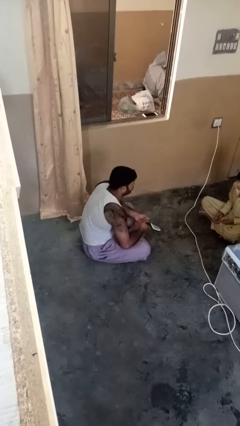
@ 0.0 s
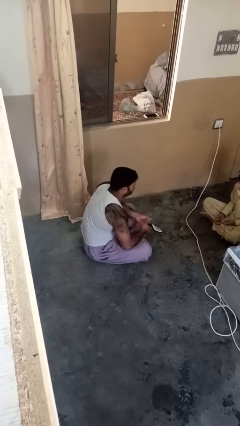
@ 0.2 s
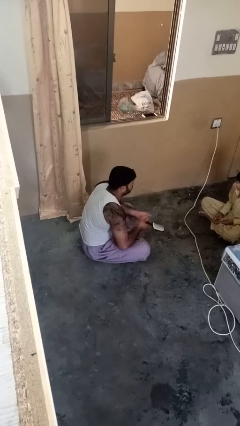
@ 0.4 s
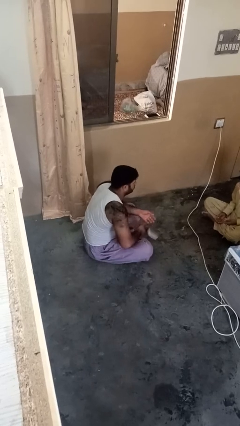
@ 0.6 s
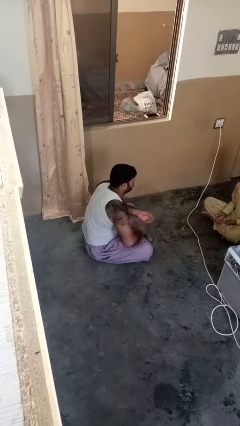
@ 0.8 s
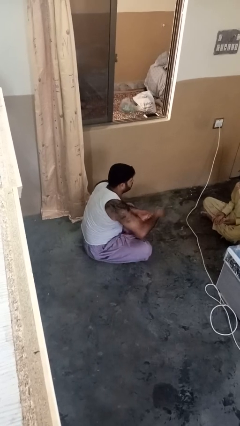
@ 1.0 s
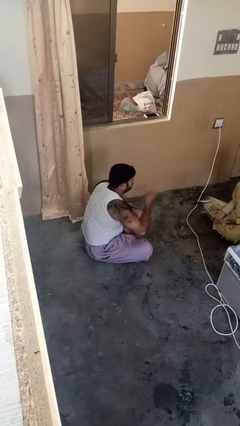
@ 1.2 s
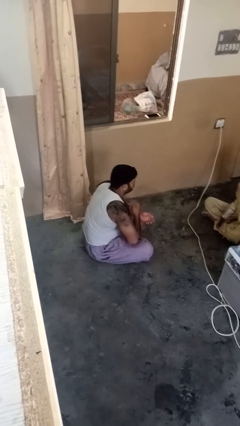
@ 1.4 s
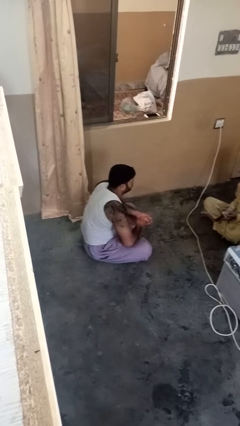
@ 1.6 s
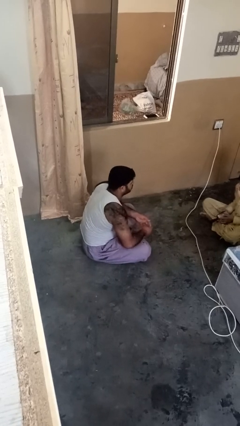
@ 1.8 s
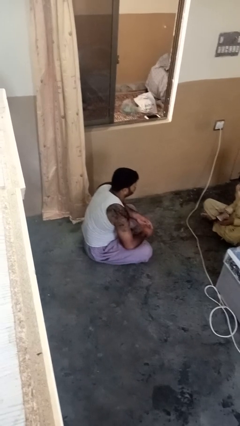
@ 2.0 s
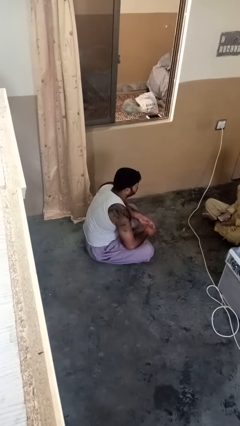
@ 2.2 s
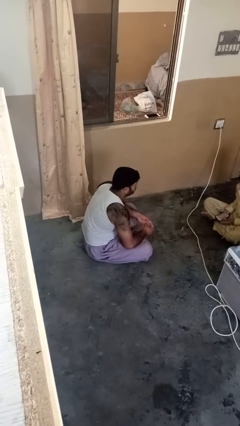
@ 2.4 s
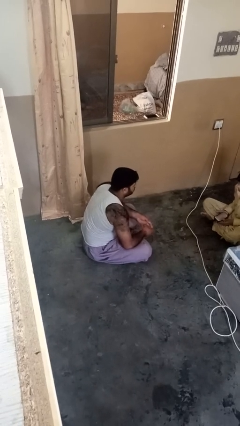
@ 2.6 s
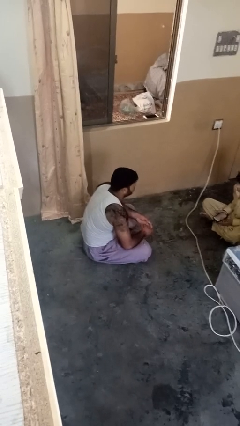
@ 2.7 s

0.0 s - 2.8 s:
person throws object to person

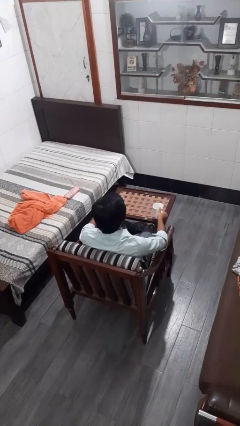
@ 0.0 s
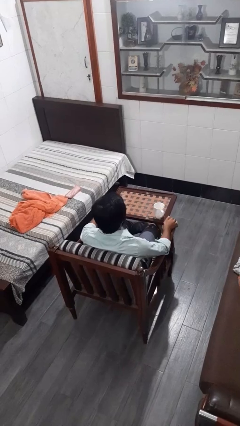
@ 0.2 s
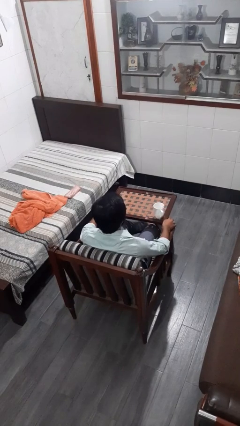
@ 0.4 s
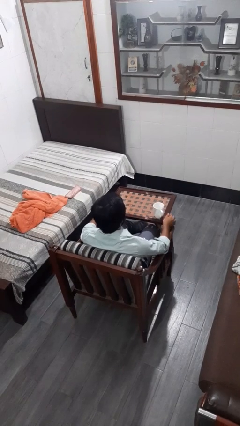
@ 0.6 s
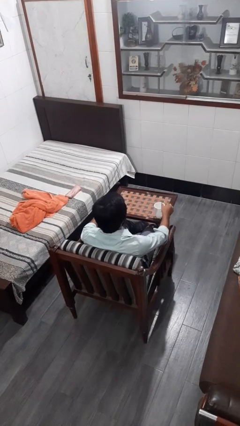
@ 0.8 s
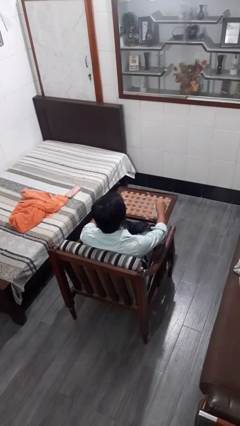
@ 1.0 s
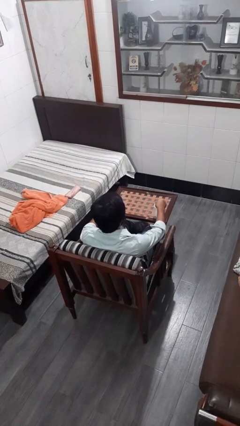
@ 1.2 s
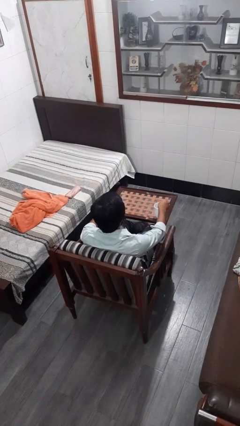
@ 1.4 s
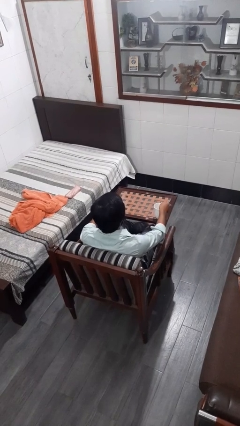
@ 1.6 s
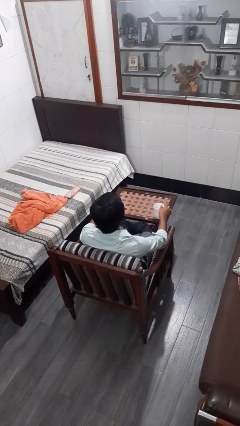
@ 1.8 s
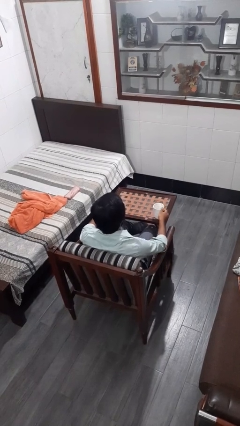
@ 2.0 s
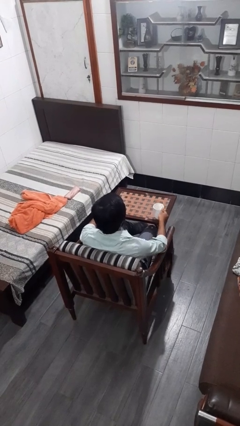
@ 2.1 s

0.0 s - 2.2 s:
person stirs mug

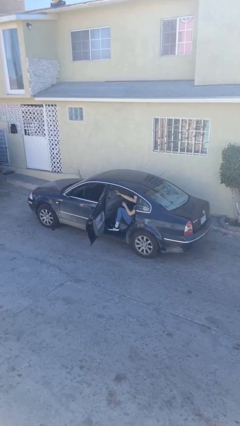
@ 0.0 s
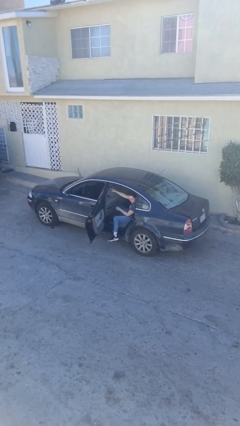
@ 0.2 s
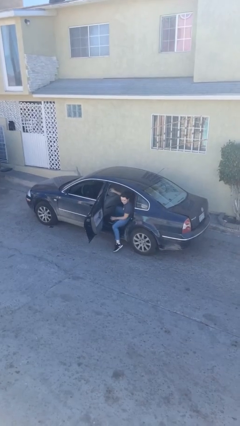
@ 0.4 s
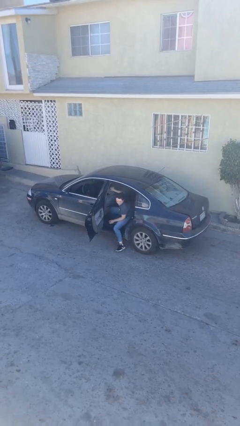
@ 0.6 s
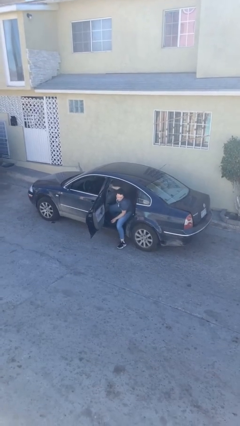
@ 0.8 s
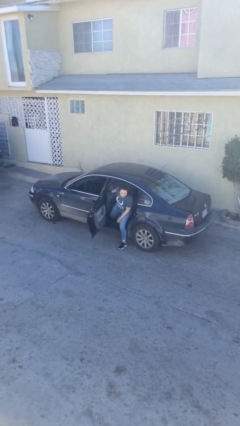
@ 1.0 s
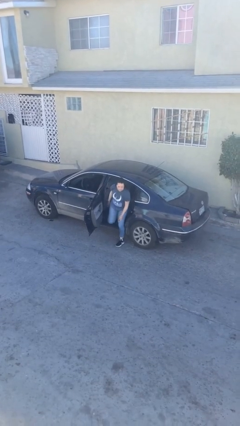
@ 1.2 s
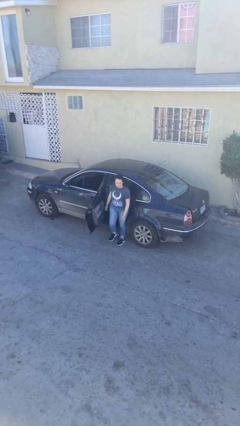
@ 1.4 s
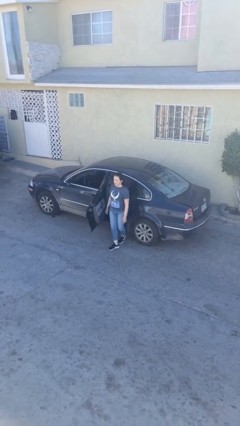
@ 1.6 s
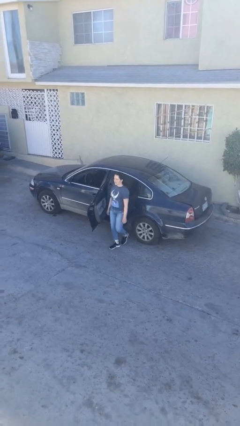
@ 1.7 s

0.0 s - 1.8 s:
person exits car

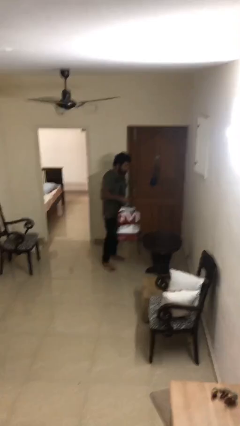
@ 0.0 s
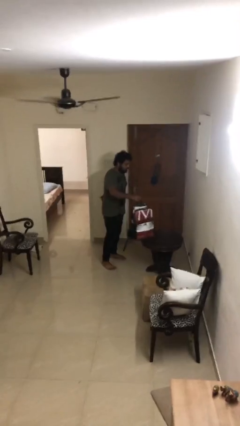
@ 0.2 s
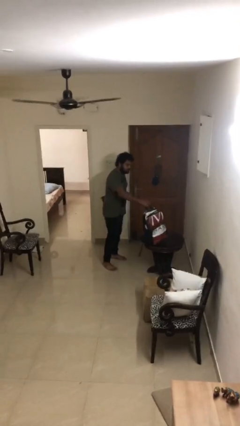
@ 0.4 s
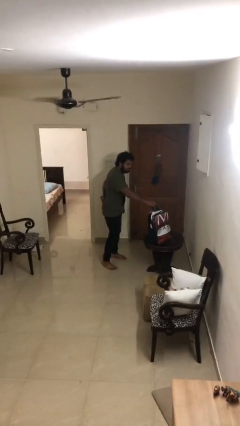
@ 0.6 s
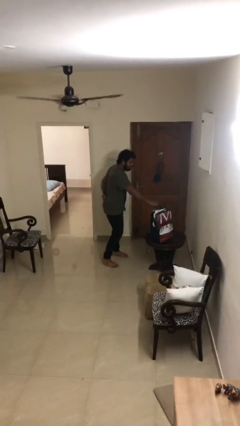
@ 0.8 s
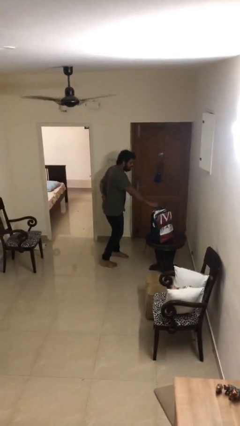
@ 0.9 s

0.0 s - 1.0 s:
person puts down object on table

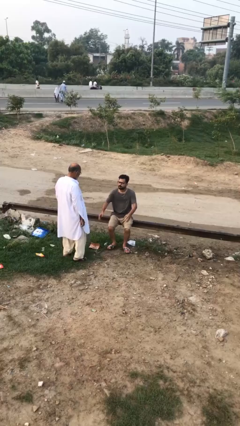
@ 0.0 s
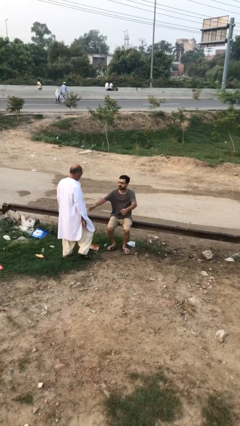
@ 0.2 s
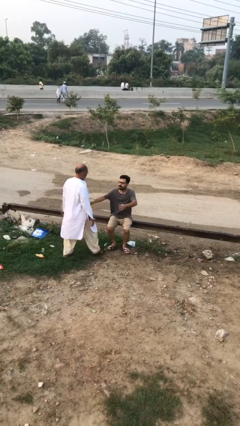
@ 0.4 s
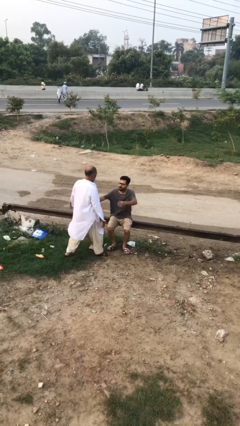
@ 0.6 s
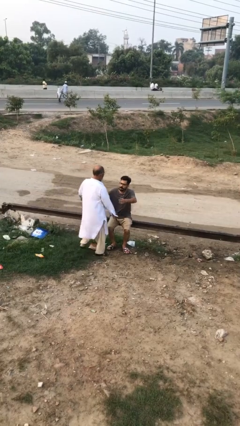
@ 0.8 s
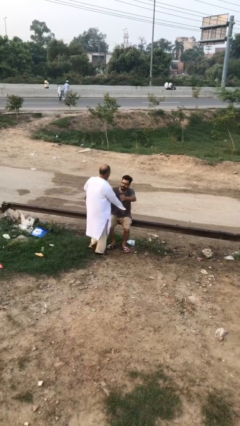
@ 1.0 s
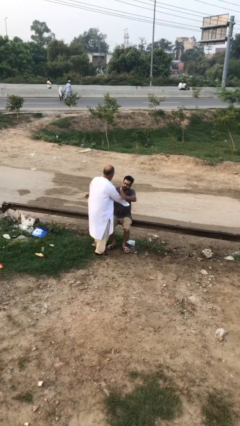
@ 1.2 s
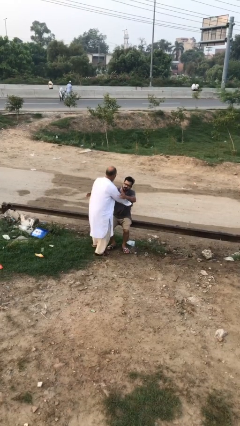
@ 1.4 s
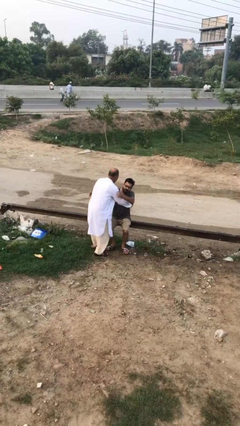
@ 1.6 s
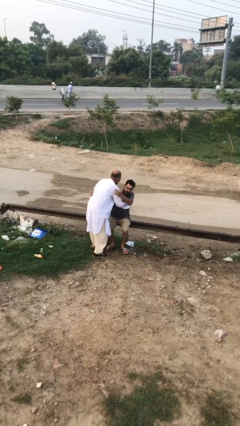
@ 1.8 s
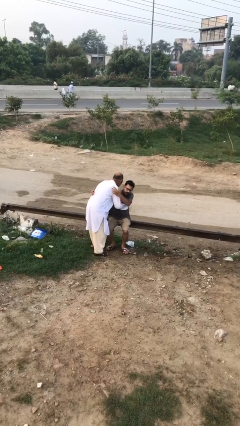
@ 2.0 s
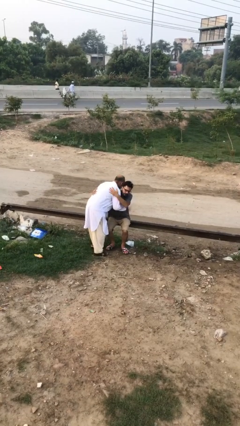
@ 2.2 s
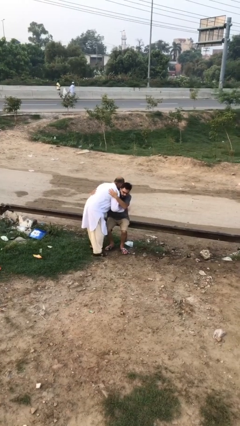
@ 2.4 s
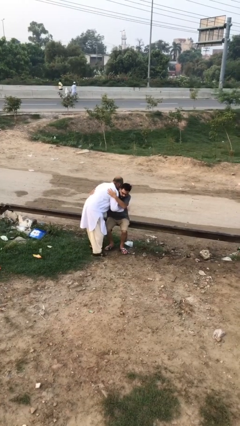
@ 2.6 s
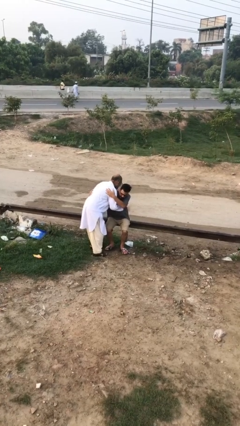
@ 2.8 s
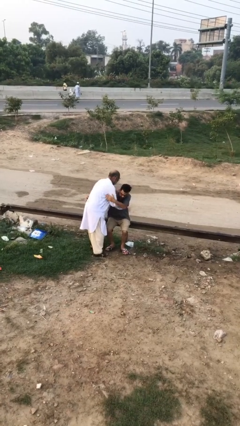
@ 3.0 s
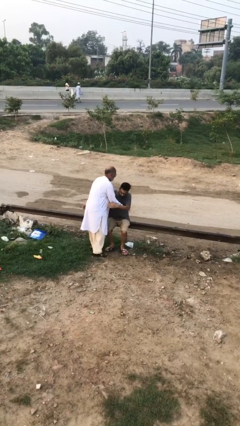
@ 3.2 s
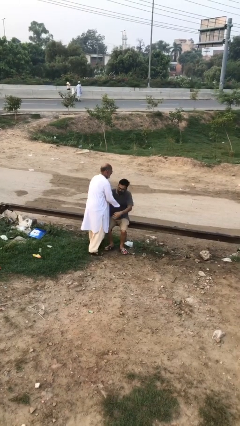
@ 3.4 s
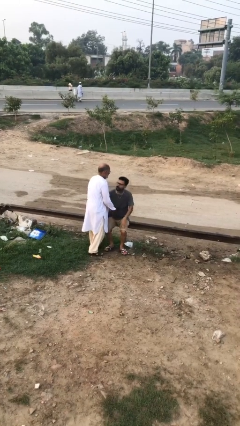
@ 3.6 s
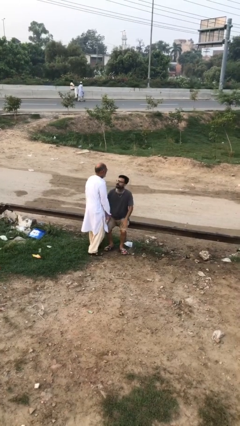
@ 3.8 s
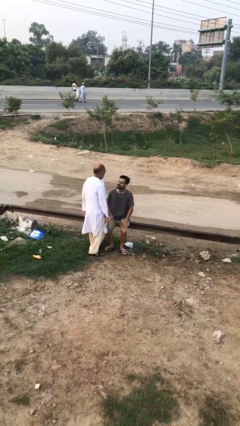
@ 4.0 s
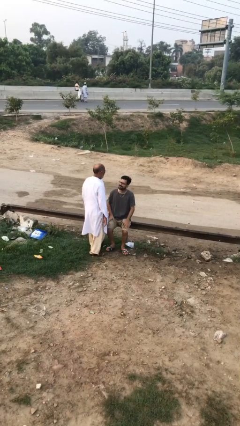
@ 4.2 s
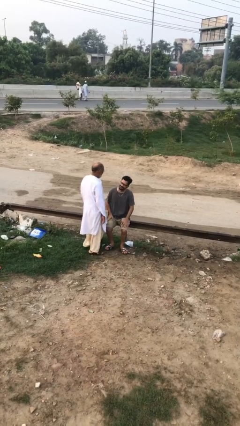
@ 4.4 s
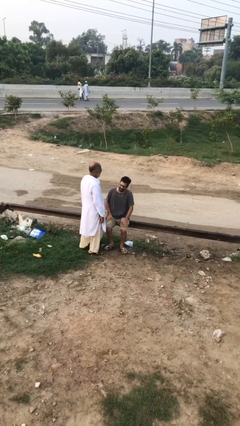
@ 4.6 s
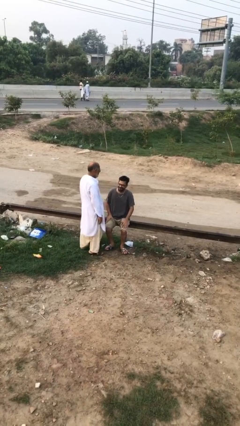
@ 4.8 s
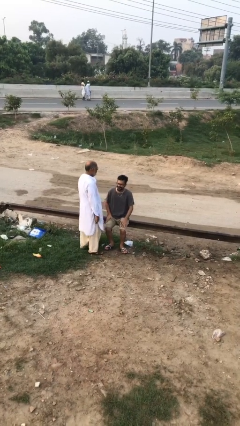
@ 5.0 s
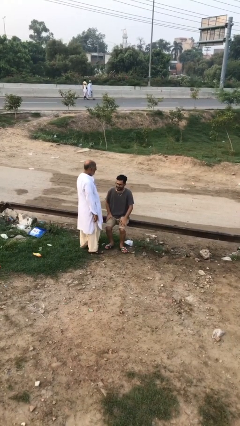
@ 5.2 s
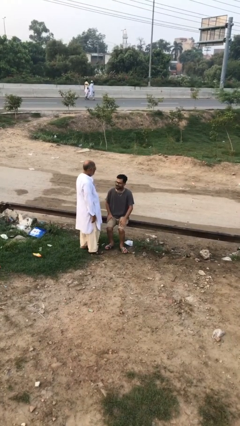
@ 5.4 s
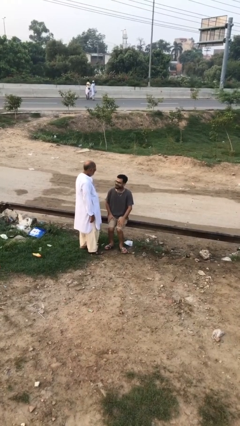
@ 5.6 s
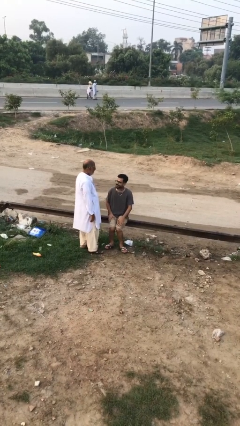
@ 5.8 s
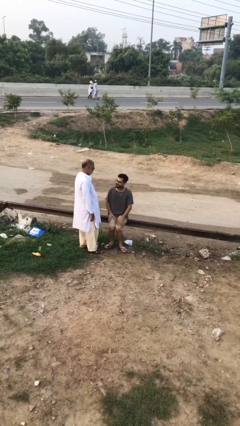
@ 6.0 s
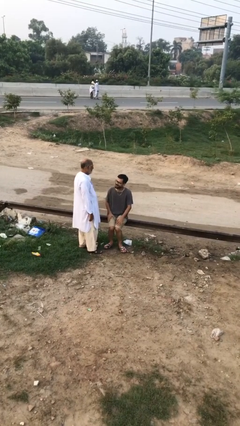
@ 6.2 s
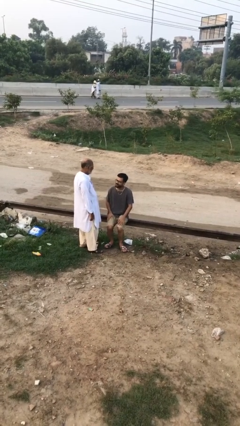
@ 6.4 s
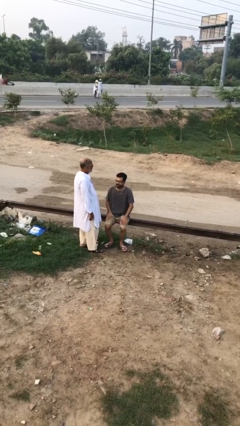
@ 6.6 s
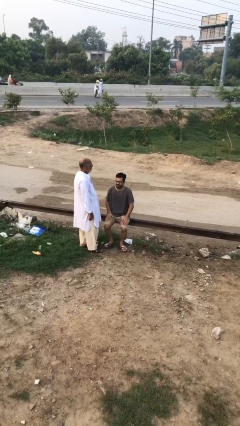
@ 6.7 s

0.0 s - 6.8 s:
person embraces person

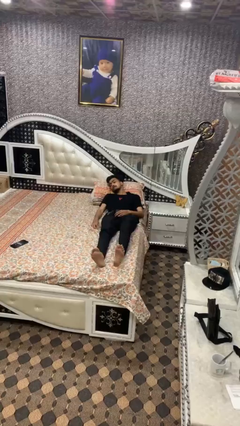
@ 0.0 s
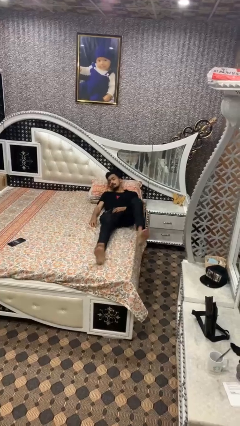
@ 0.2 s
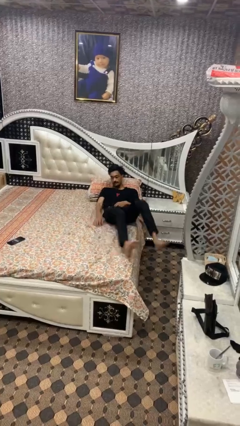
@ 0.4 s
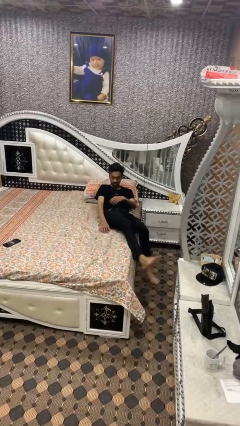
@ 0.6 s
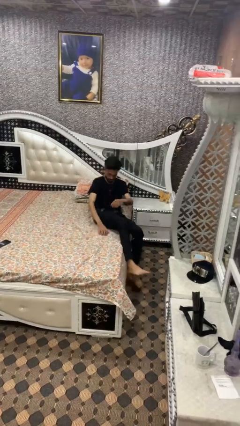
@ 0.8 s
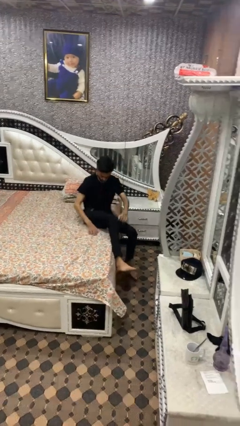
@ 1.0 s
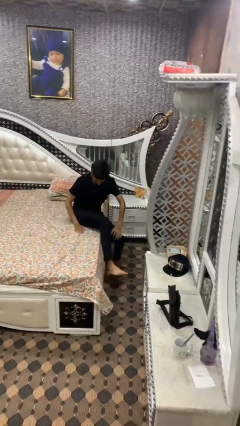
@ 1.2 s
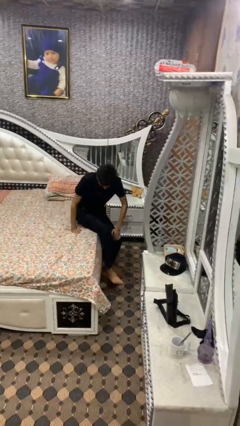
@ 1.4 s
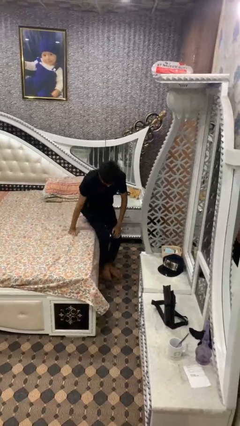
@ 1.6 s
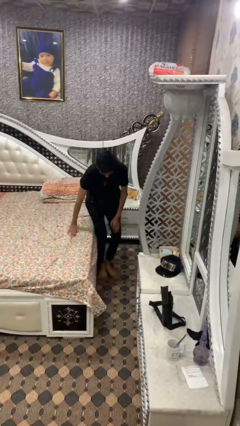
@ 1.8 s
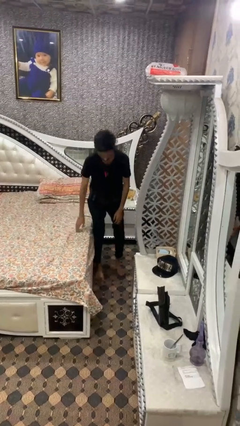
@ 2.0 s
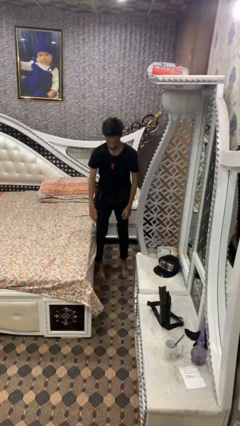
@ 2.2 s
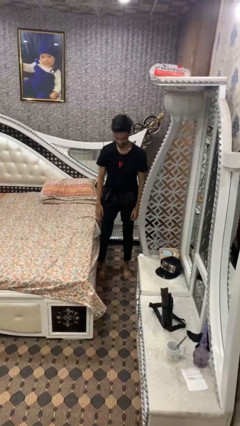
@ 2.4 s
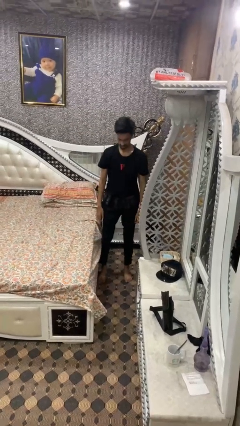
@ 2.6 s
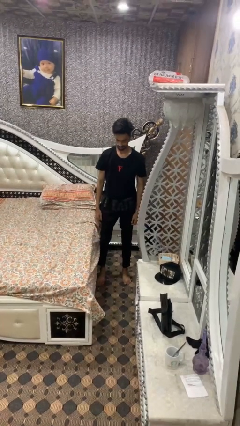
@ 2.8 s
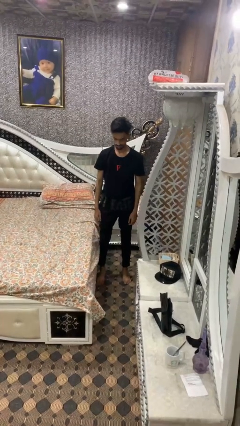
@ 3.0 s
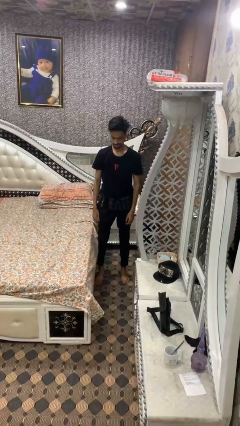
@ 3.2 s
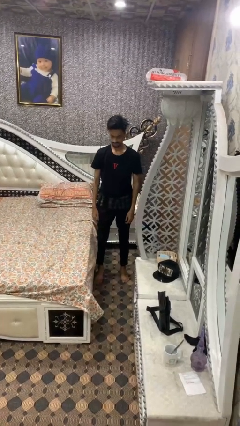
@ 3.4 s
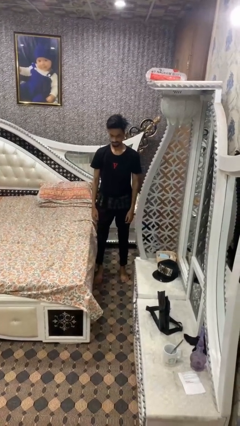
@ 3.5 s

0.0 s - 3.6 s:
person stands up
